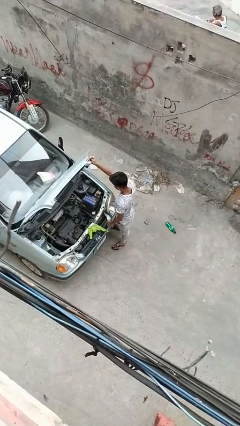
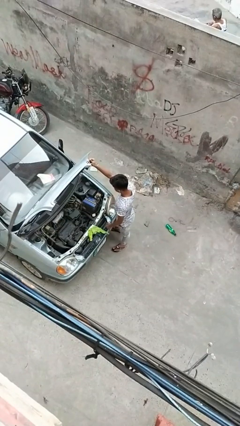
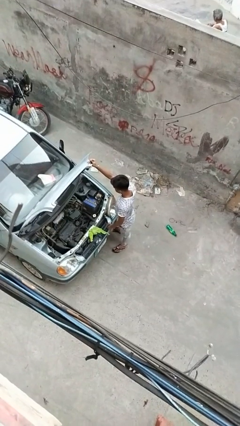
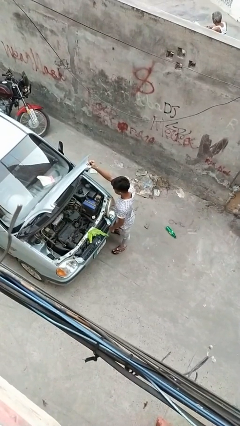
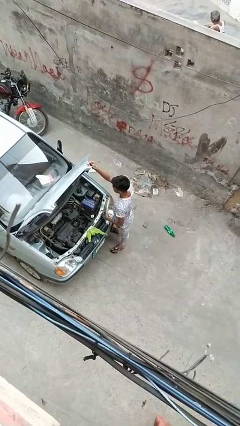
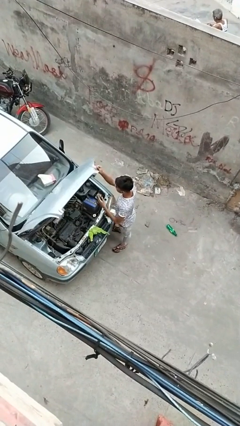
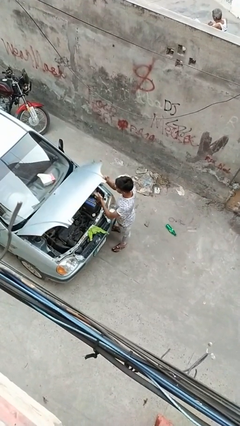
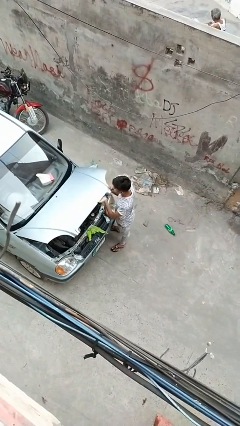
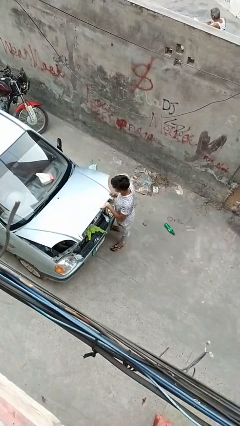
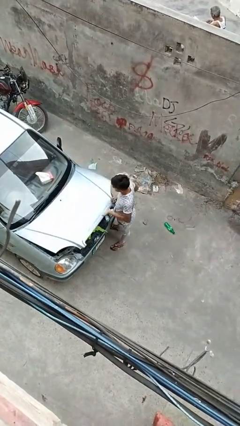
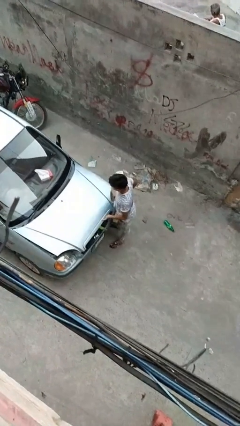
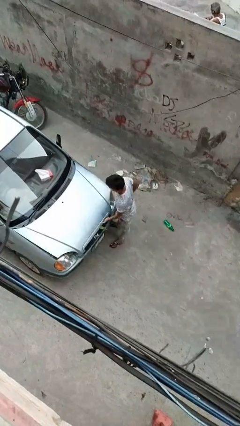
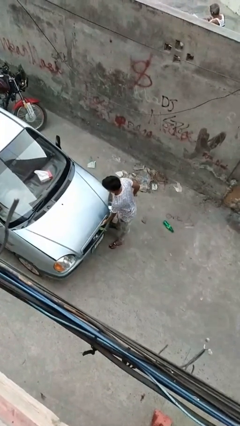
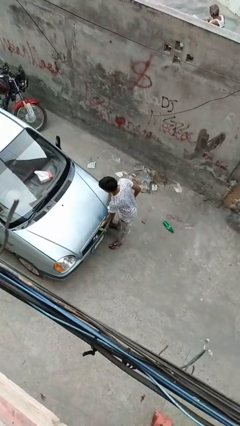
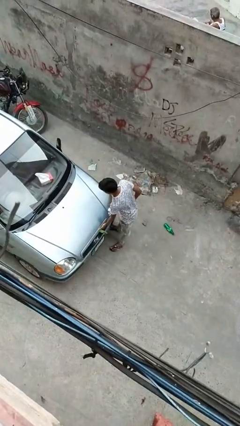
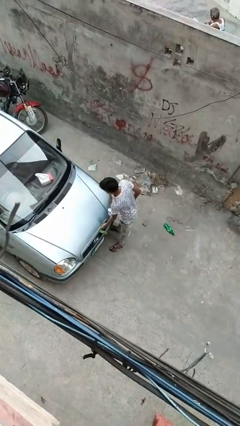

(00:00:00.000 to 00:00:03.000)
person closes car hood

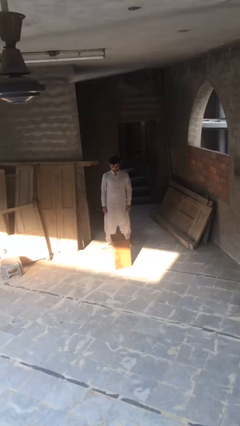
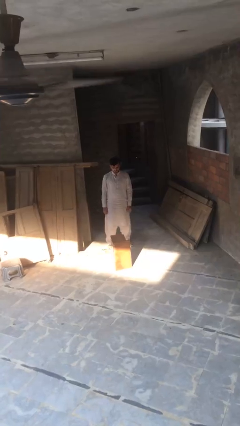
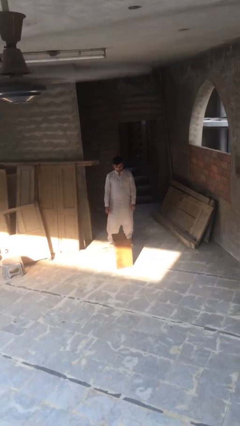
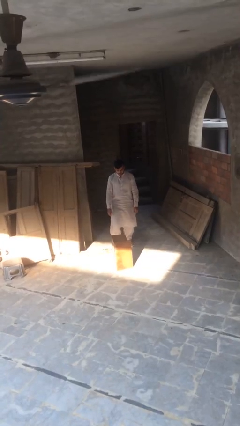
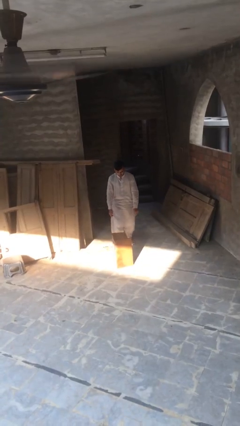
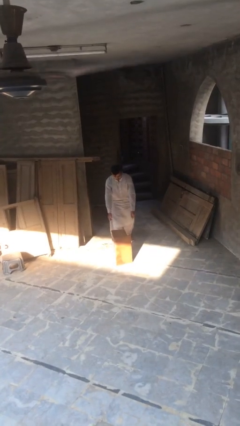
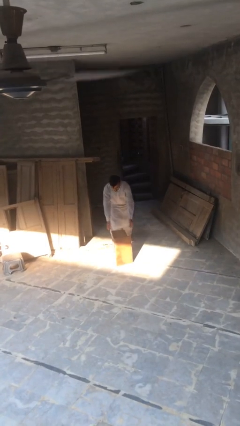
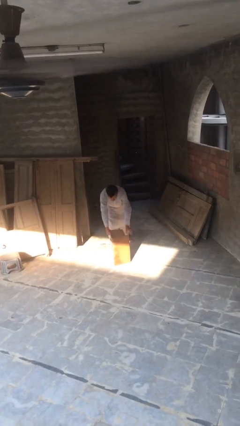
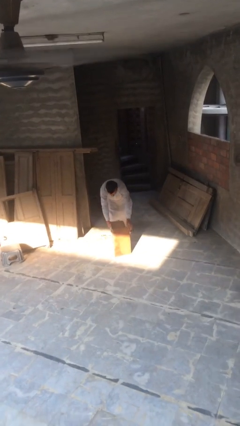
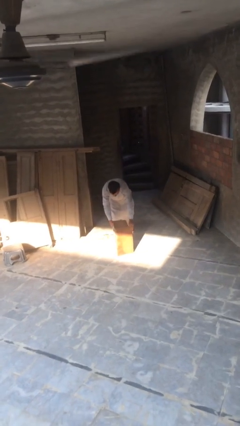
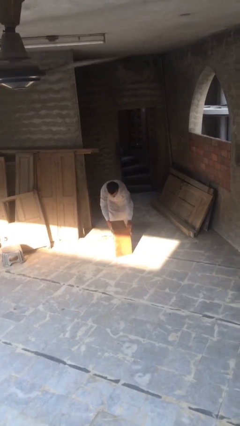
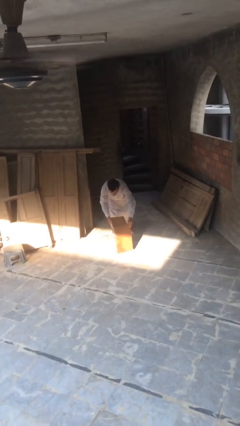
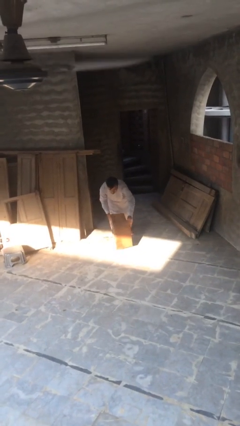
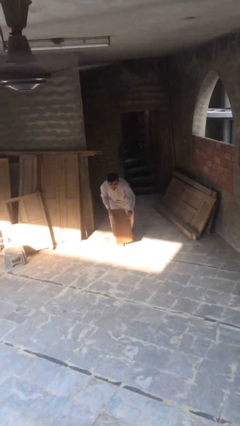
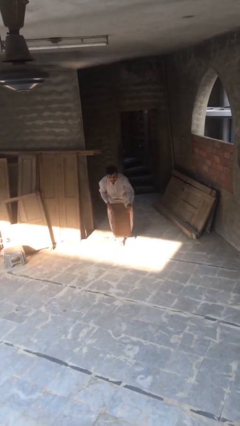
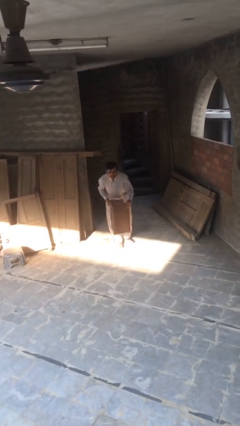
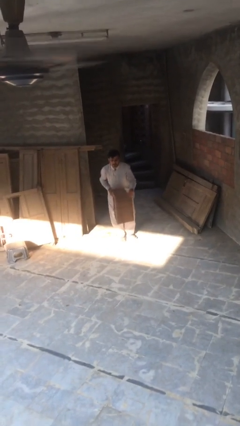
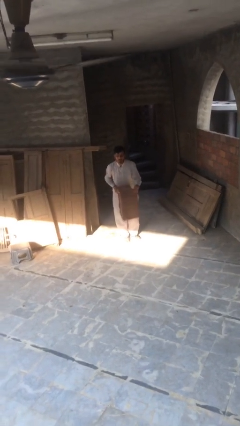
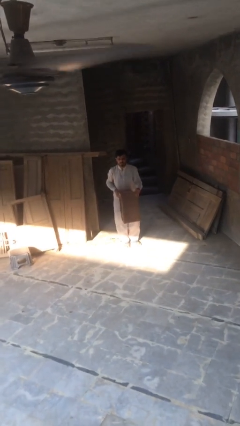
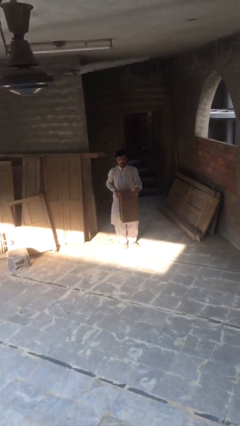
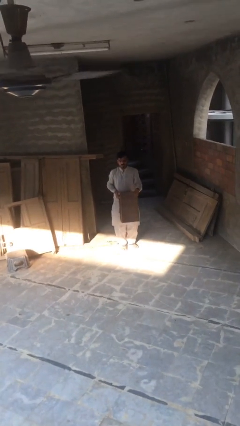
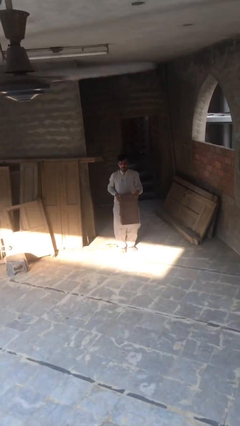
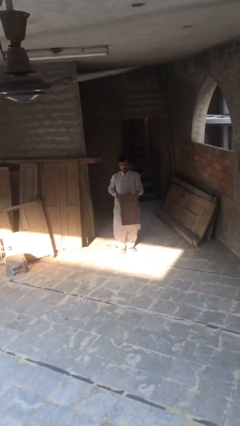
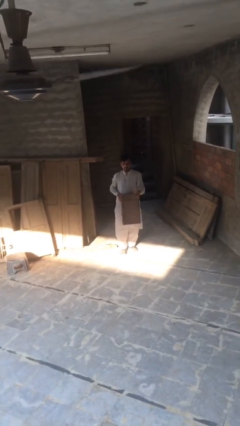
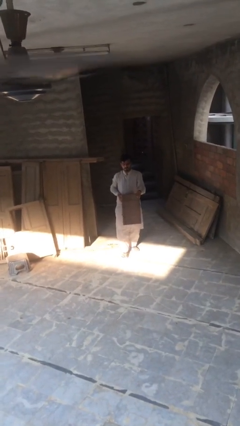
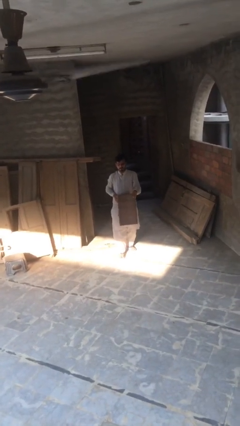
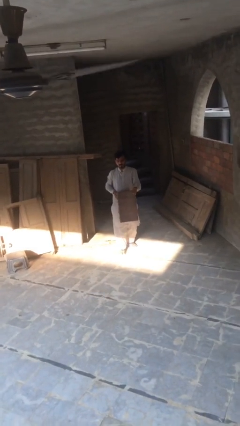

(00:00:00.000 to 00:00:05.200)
person picks up object from floor

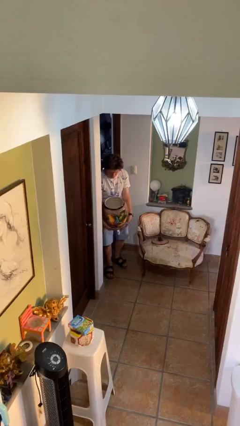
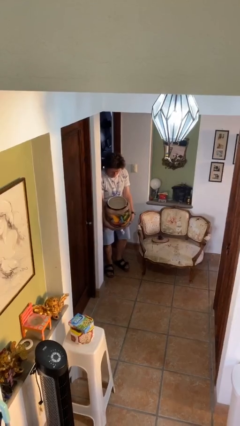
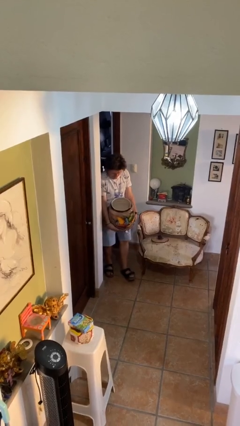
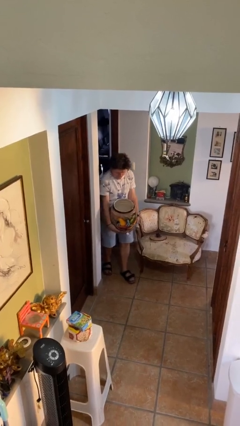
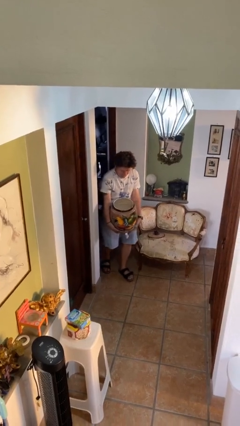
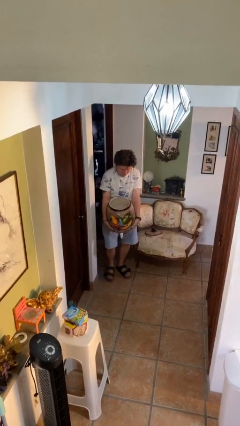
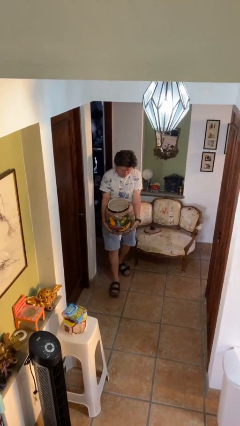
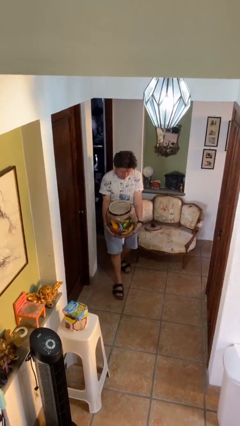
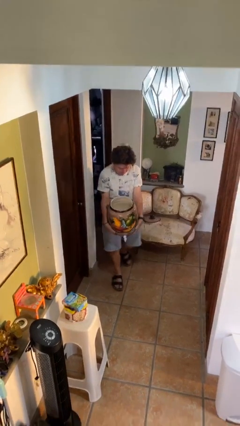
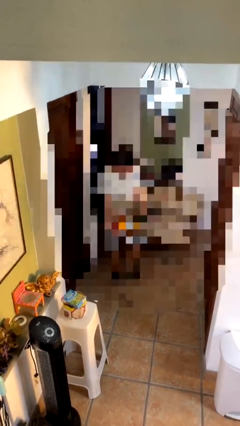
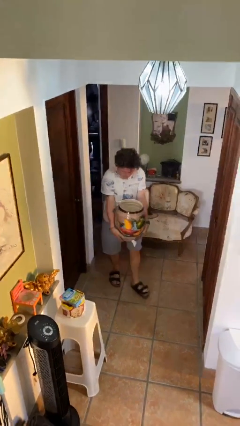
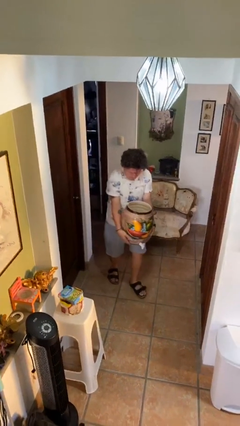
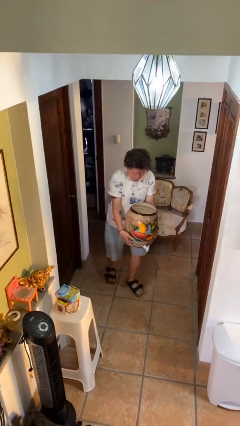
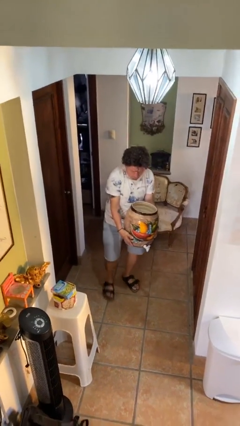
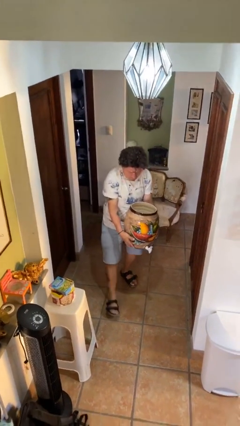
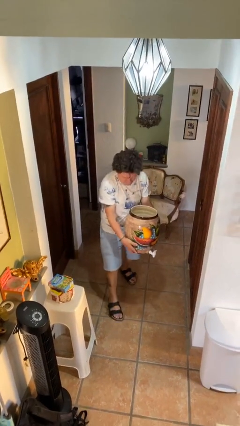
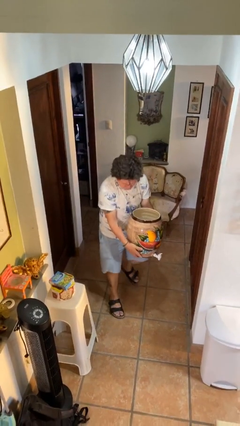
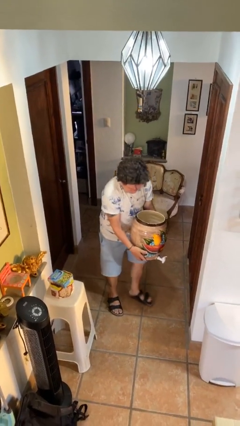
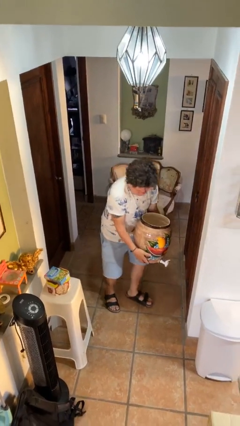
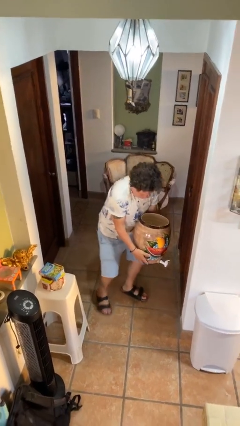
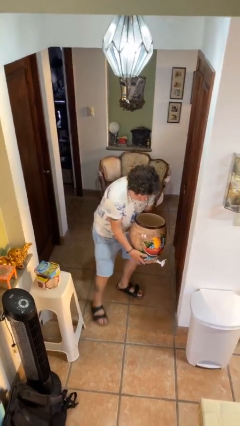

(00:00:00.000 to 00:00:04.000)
person carries heavy object

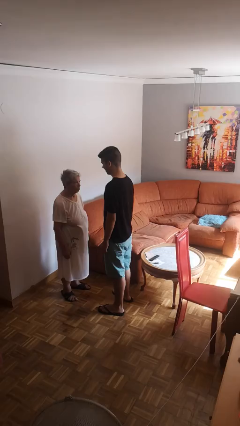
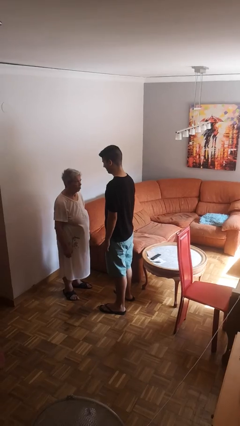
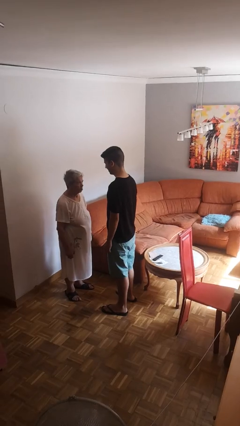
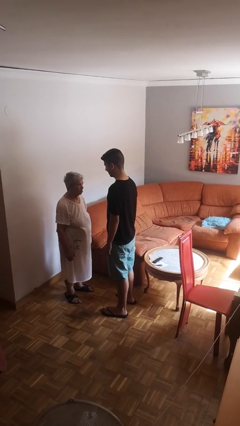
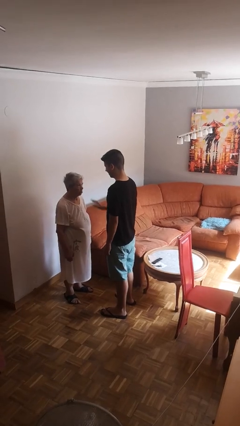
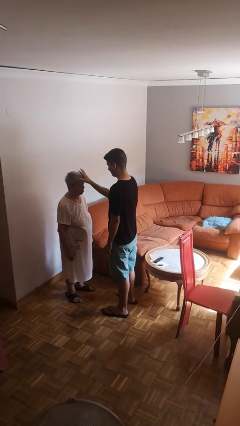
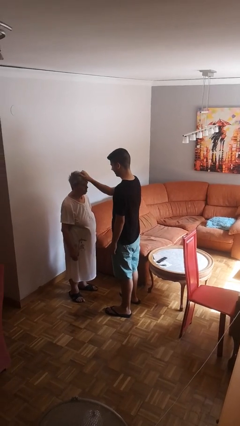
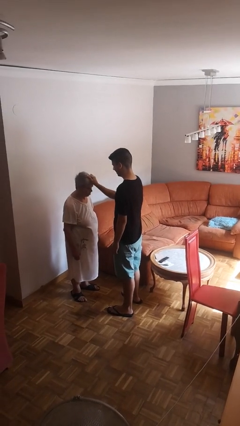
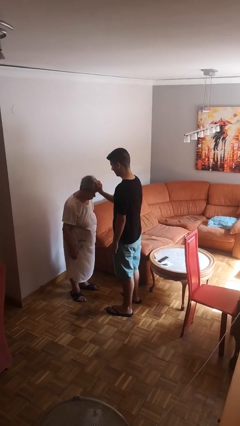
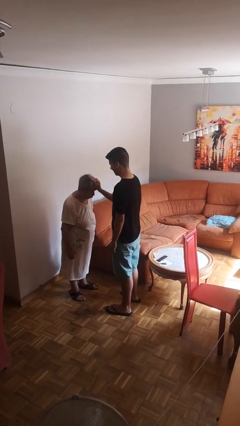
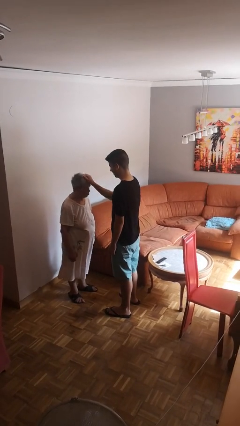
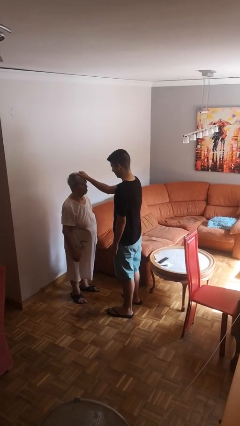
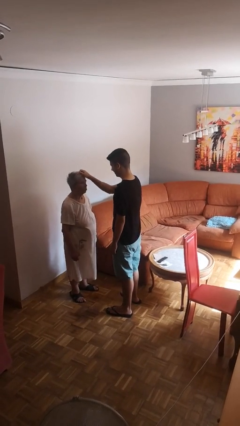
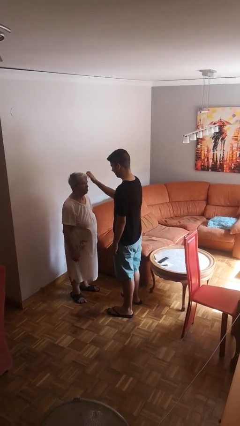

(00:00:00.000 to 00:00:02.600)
person grabs person by hair

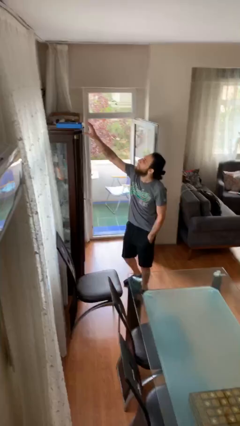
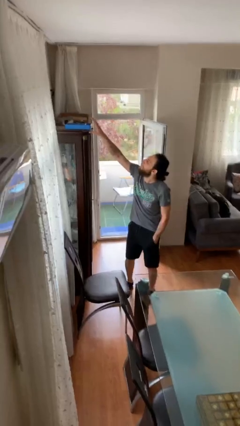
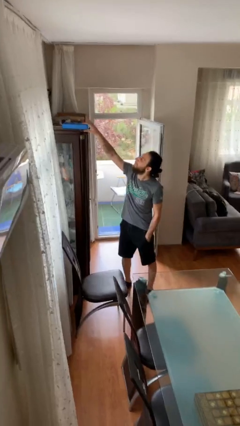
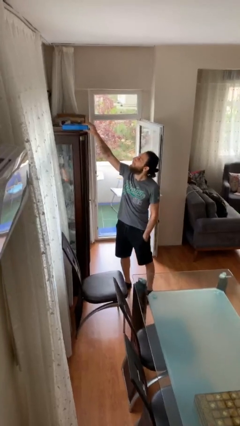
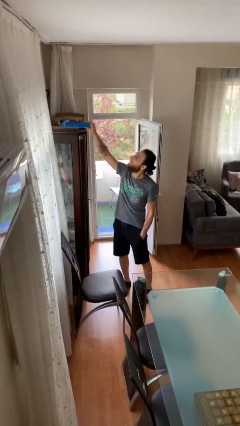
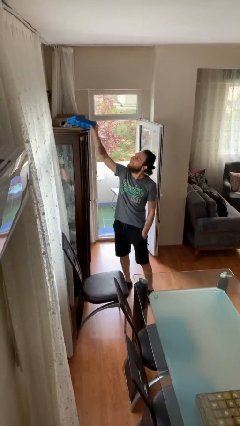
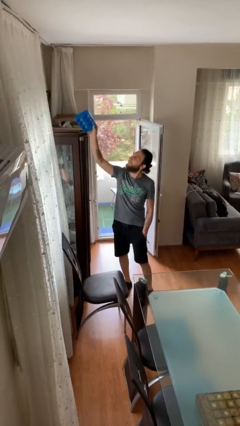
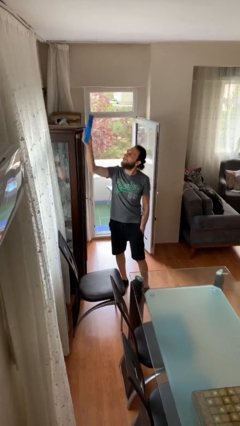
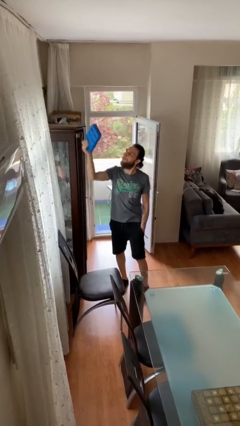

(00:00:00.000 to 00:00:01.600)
person picks up object from shelf

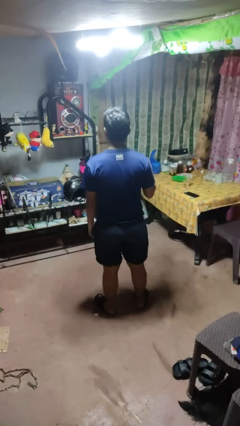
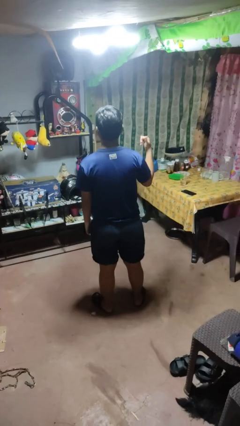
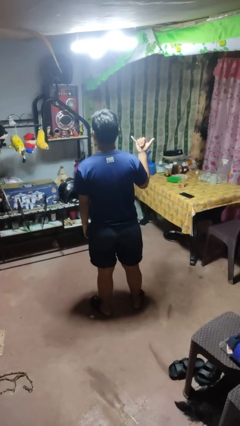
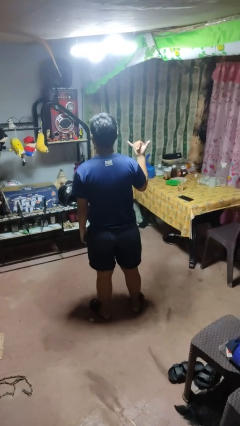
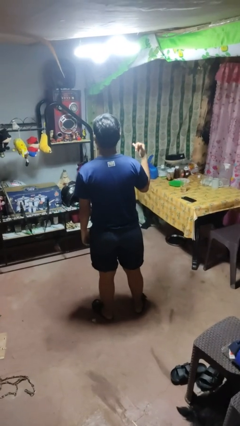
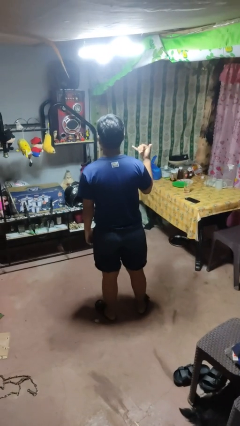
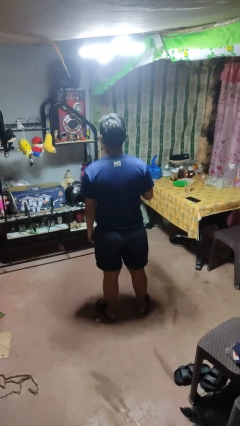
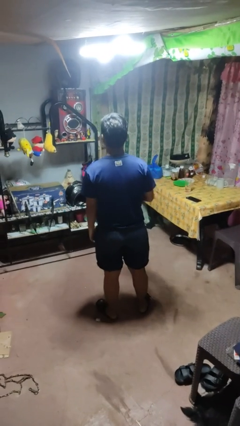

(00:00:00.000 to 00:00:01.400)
person gestures hang loose
